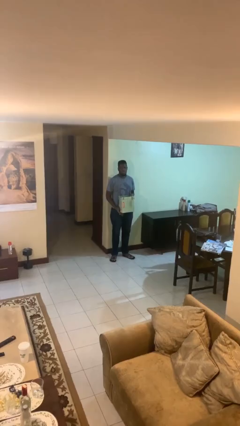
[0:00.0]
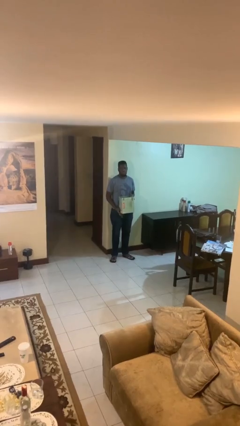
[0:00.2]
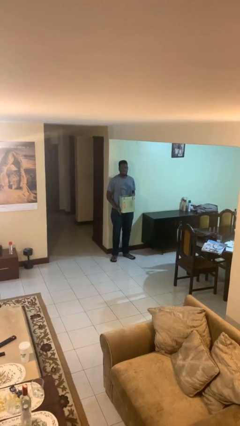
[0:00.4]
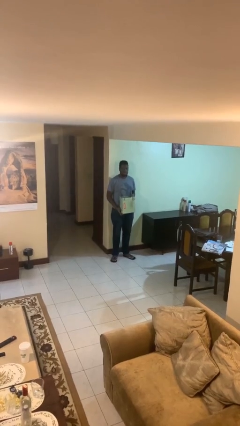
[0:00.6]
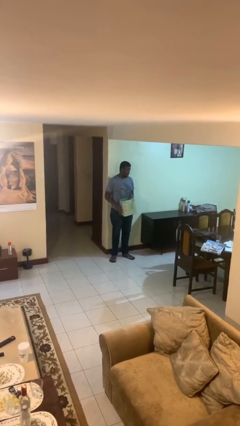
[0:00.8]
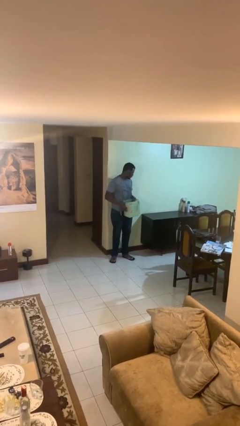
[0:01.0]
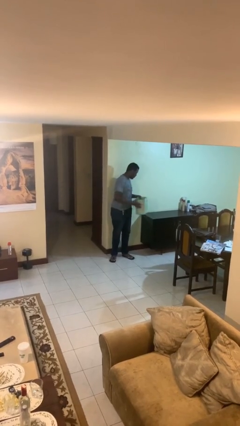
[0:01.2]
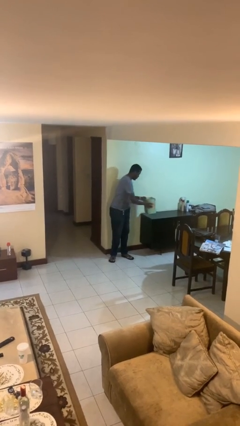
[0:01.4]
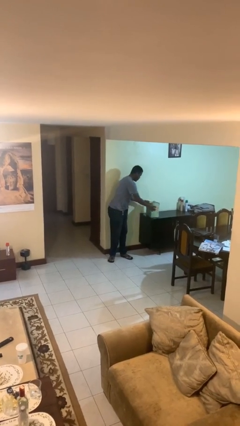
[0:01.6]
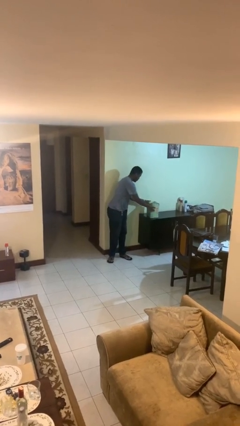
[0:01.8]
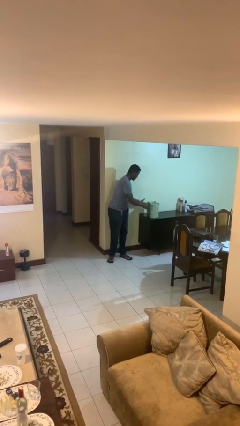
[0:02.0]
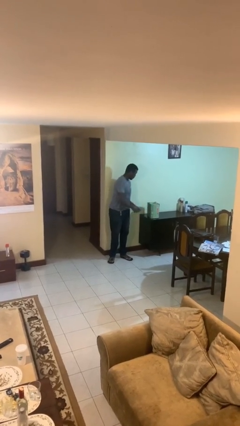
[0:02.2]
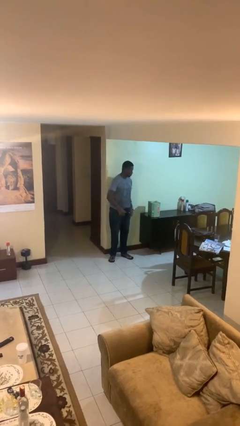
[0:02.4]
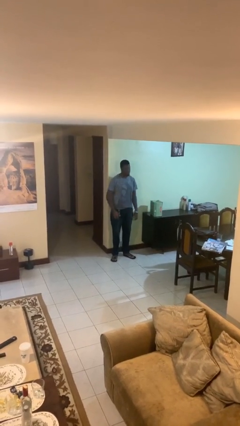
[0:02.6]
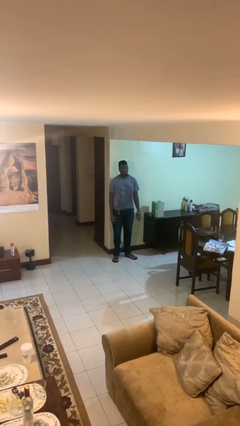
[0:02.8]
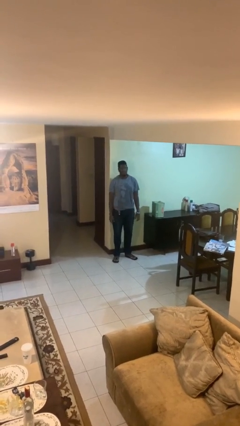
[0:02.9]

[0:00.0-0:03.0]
person puts down object on table

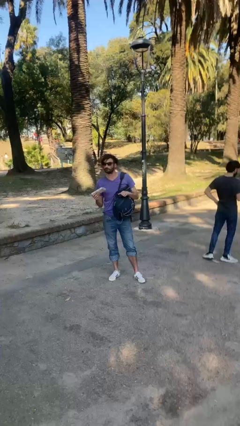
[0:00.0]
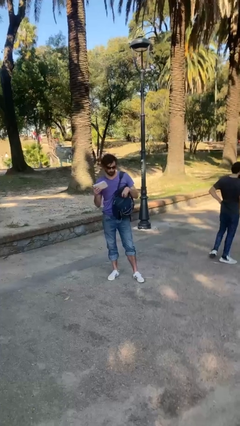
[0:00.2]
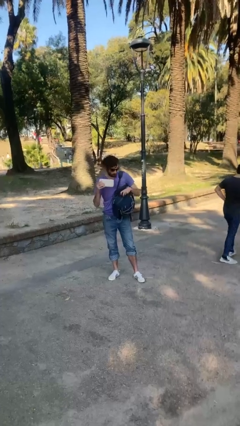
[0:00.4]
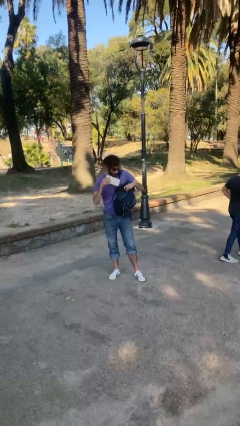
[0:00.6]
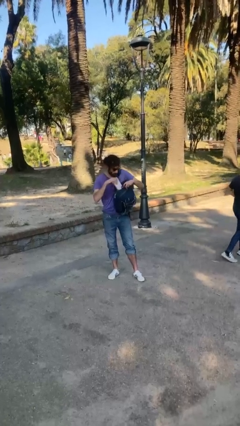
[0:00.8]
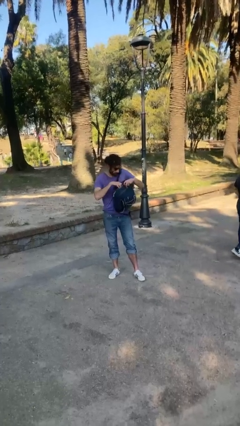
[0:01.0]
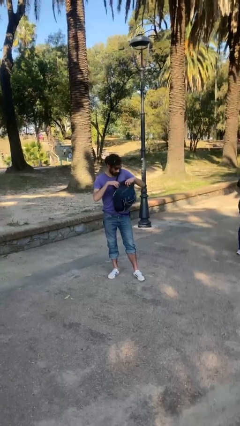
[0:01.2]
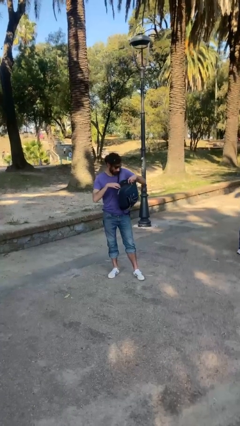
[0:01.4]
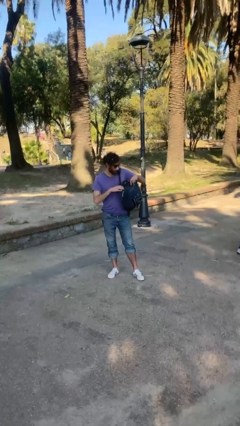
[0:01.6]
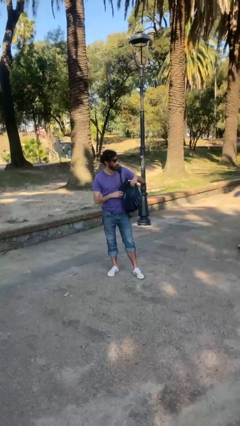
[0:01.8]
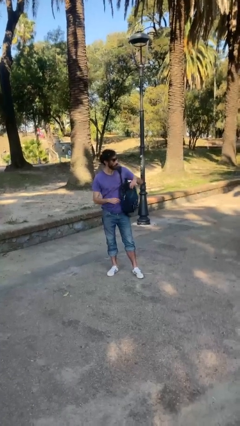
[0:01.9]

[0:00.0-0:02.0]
person puts object into backpack

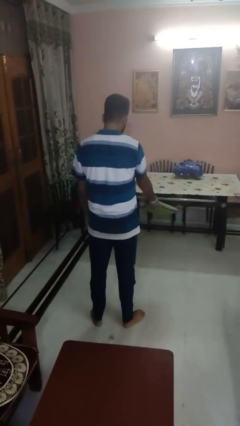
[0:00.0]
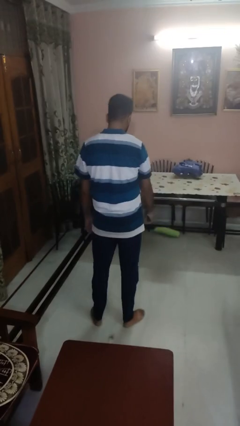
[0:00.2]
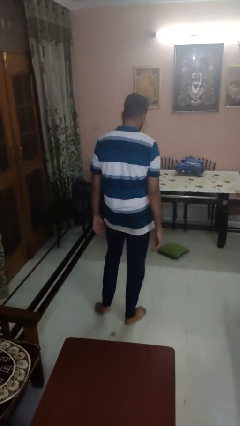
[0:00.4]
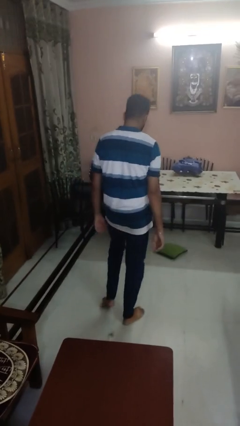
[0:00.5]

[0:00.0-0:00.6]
person throws object to ground

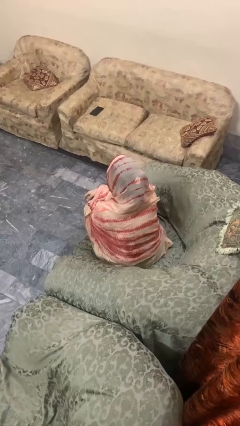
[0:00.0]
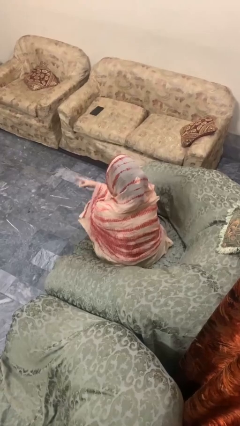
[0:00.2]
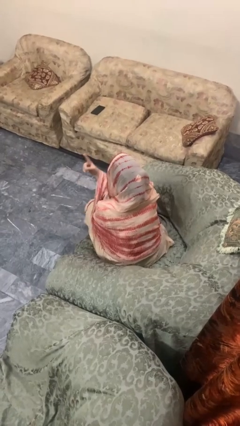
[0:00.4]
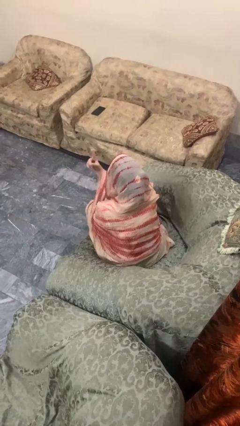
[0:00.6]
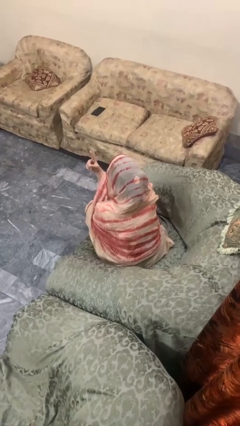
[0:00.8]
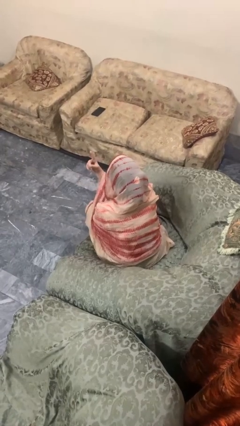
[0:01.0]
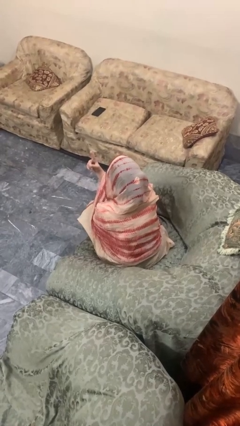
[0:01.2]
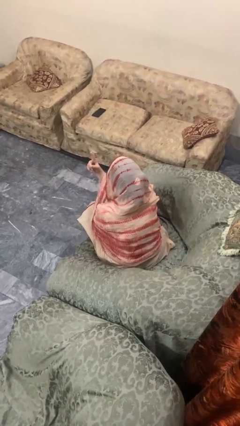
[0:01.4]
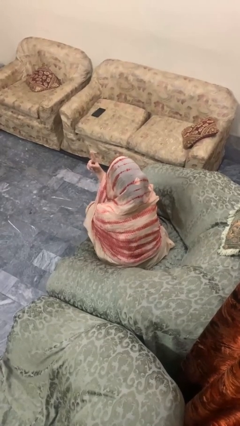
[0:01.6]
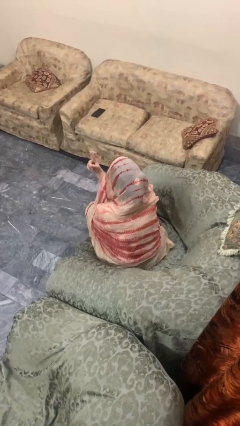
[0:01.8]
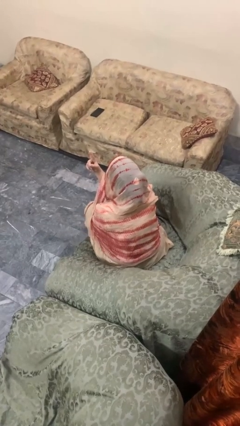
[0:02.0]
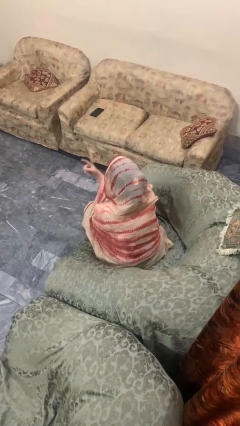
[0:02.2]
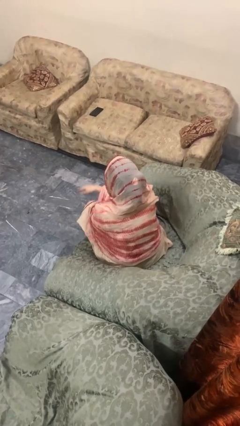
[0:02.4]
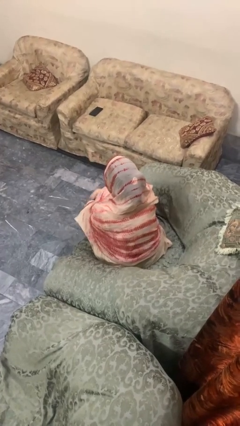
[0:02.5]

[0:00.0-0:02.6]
person gestures number one

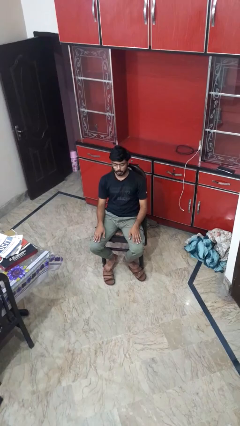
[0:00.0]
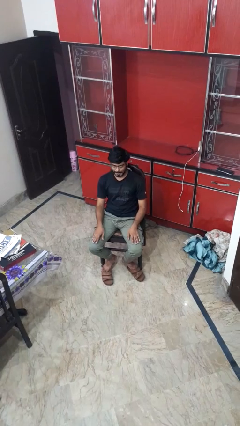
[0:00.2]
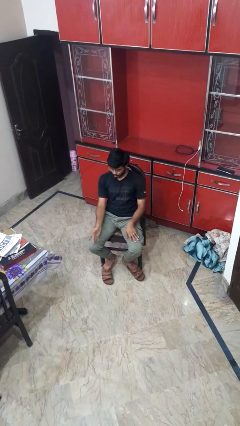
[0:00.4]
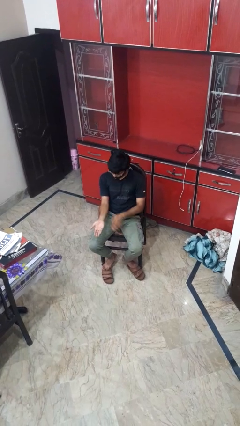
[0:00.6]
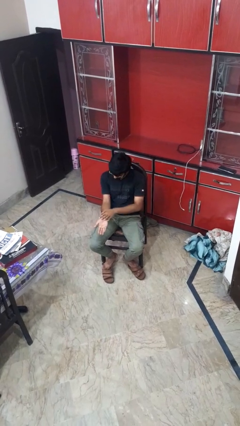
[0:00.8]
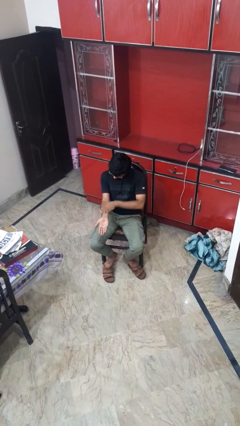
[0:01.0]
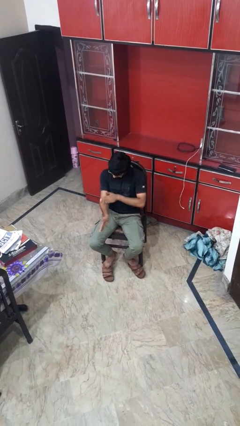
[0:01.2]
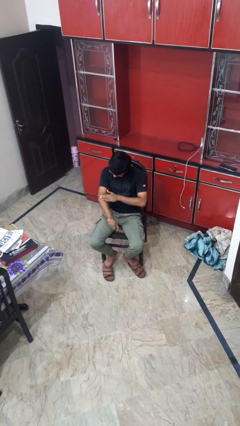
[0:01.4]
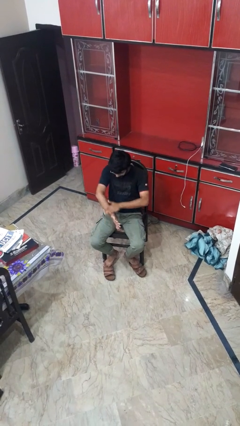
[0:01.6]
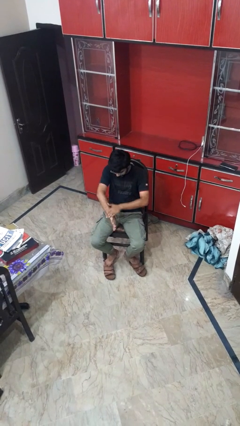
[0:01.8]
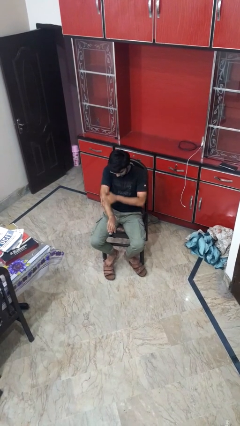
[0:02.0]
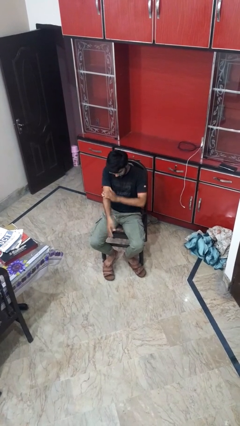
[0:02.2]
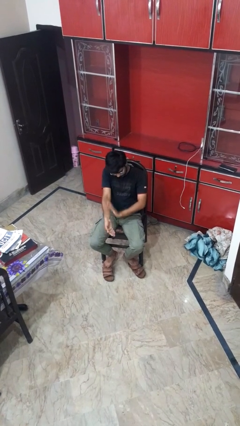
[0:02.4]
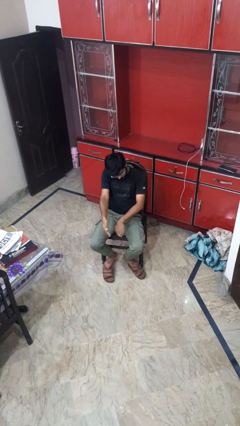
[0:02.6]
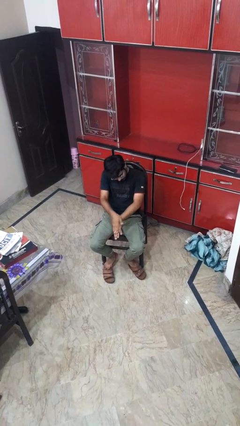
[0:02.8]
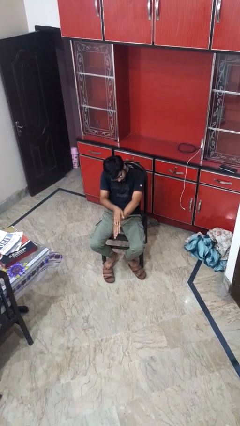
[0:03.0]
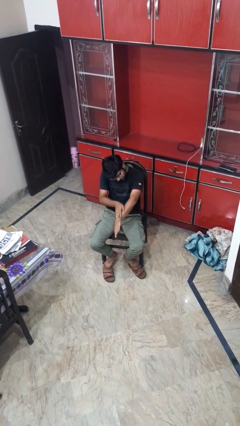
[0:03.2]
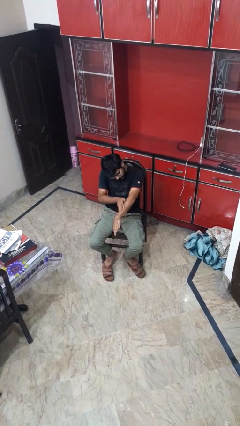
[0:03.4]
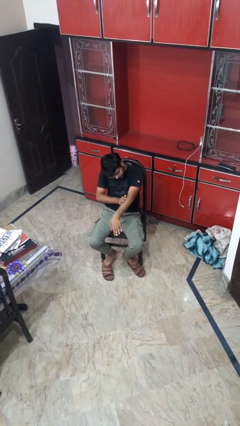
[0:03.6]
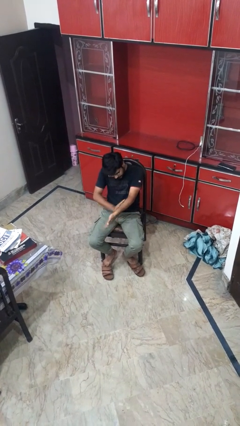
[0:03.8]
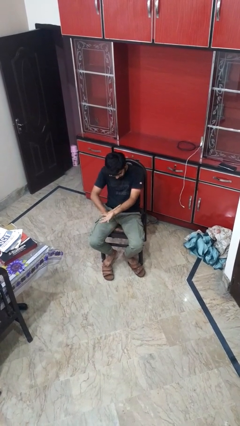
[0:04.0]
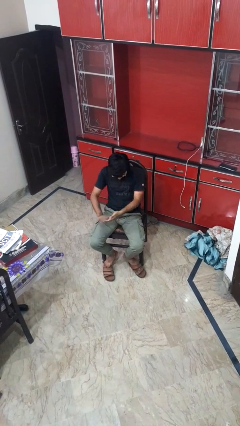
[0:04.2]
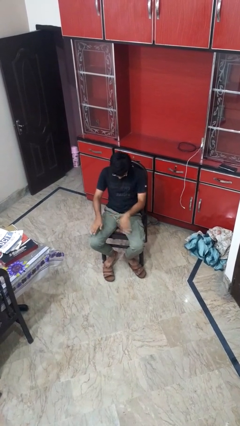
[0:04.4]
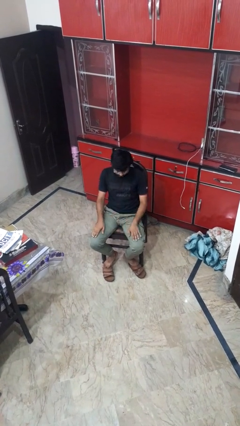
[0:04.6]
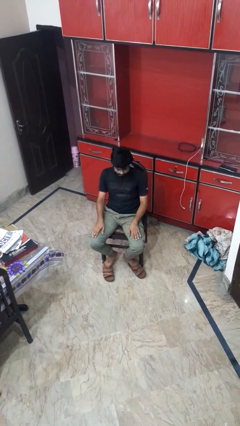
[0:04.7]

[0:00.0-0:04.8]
person looks at hands in lap

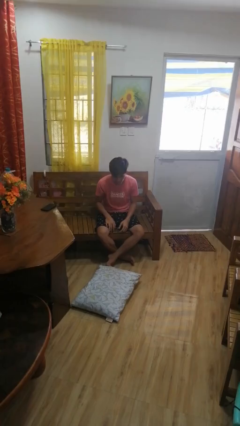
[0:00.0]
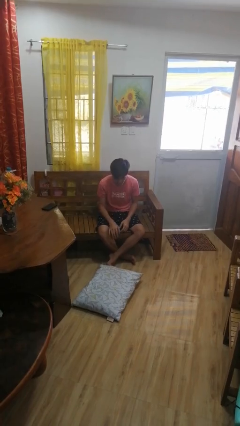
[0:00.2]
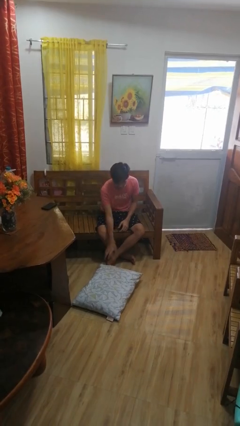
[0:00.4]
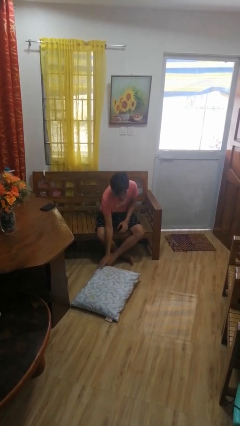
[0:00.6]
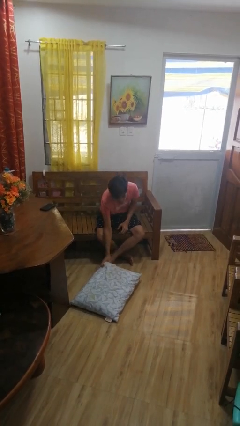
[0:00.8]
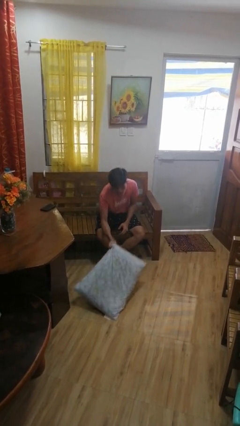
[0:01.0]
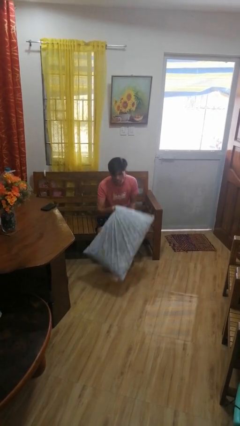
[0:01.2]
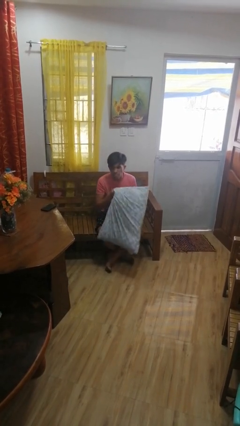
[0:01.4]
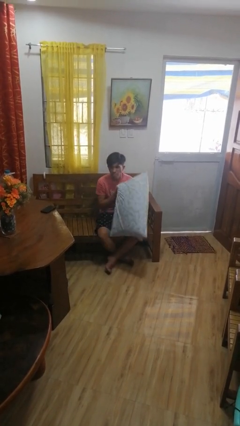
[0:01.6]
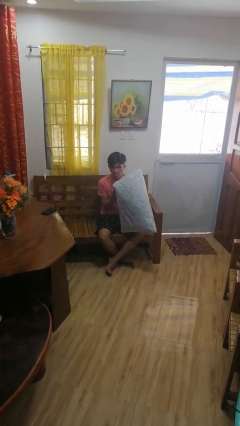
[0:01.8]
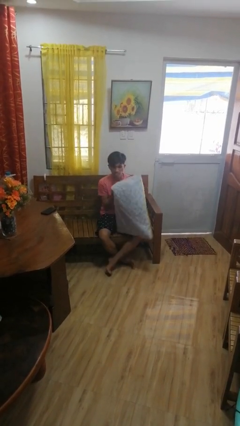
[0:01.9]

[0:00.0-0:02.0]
person picks up object from floor

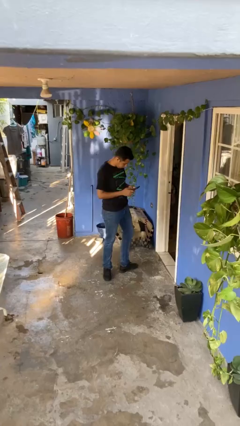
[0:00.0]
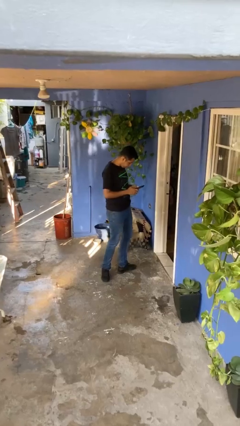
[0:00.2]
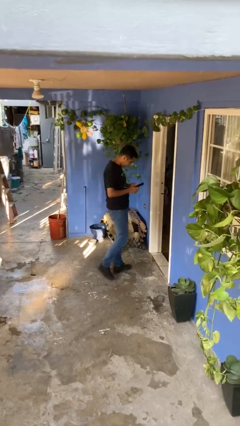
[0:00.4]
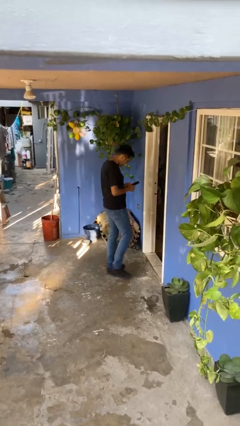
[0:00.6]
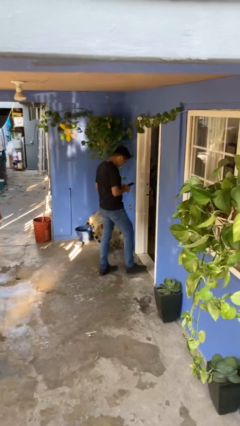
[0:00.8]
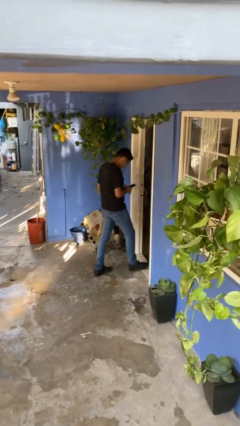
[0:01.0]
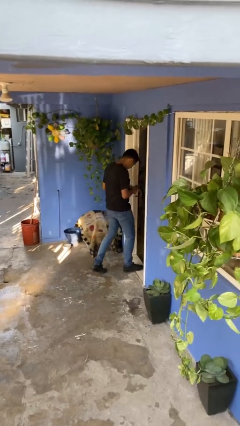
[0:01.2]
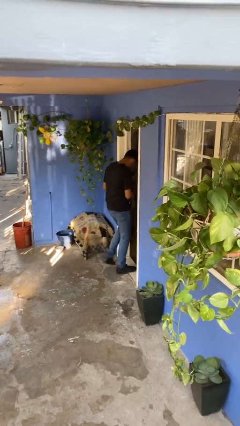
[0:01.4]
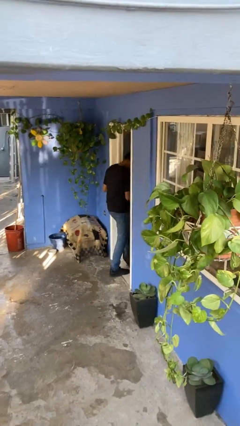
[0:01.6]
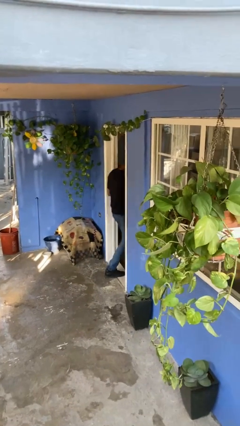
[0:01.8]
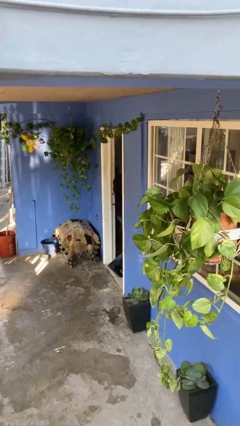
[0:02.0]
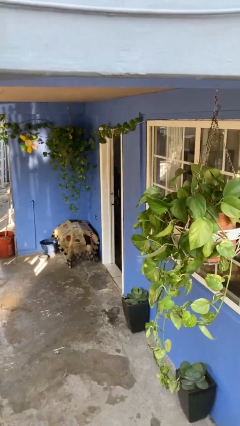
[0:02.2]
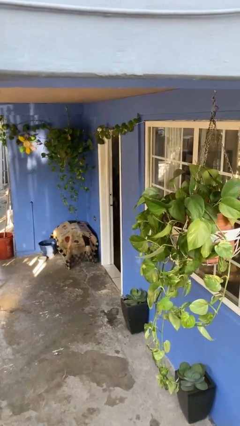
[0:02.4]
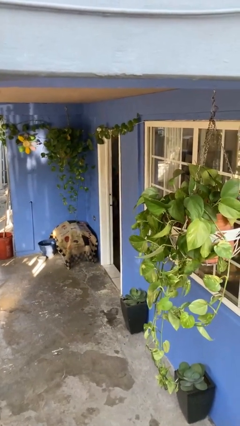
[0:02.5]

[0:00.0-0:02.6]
person exits scene through structure
